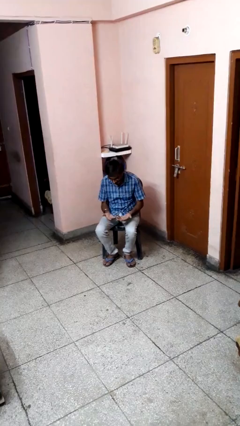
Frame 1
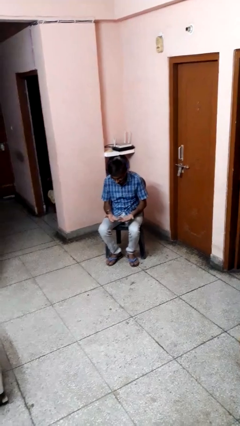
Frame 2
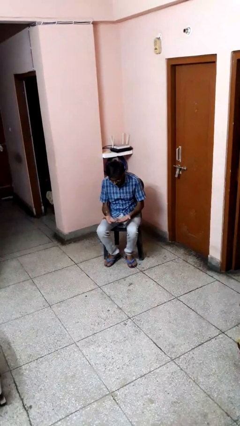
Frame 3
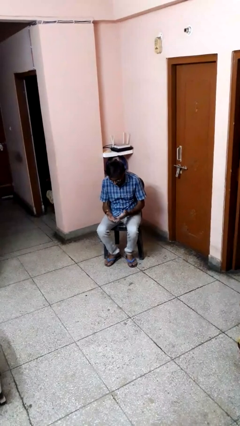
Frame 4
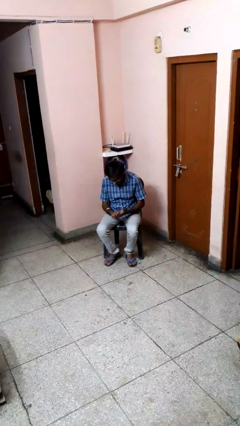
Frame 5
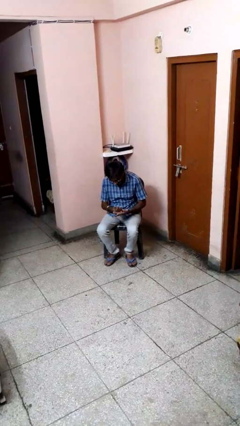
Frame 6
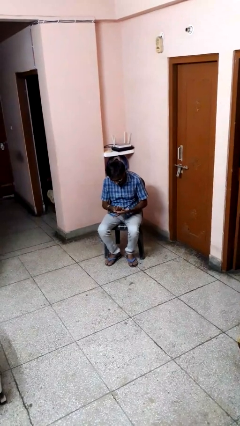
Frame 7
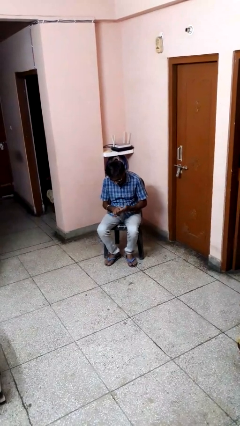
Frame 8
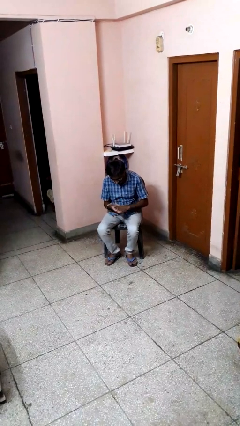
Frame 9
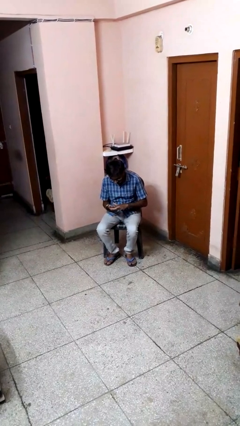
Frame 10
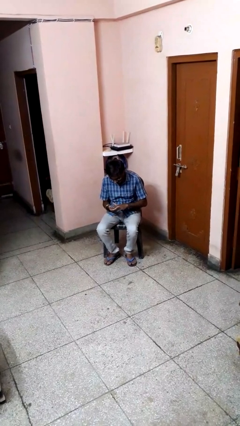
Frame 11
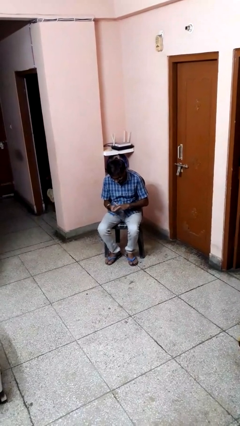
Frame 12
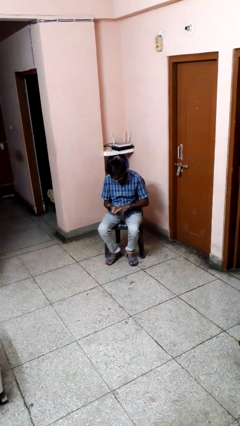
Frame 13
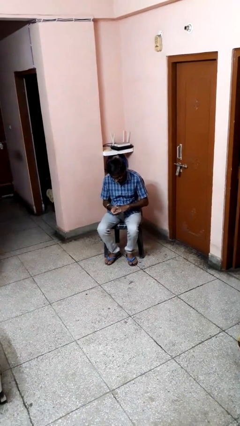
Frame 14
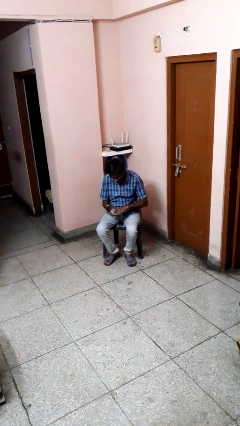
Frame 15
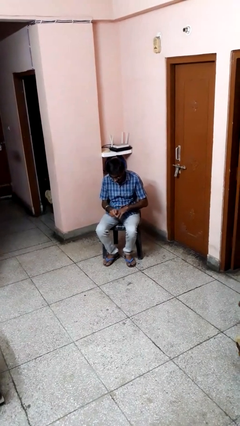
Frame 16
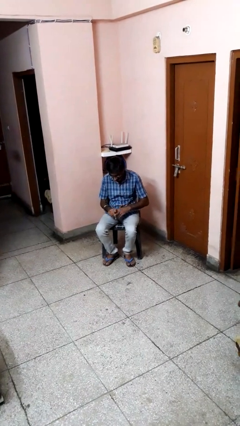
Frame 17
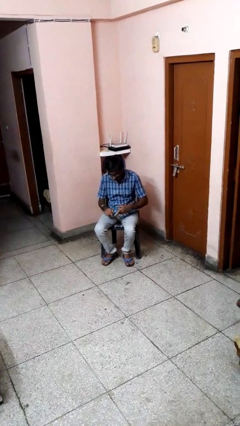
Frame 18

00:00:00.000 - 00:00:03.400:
person looks at hands in lap

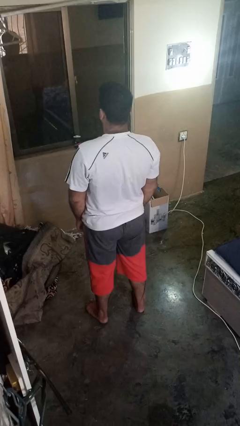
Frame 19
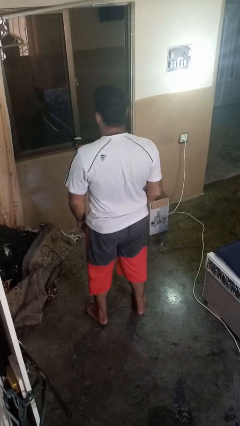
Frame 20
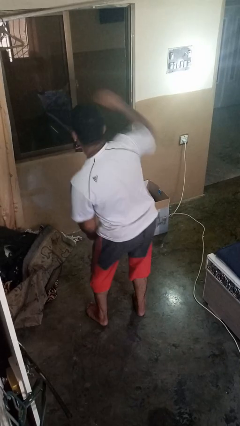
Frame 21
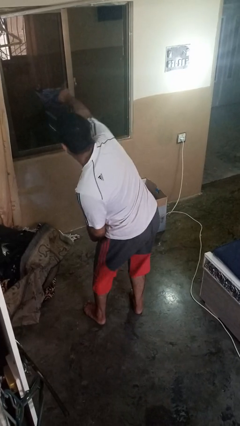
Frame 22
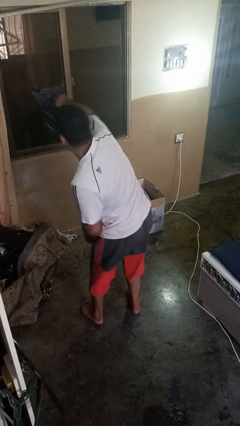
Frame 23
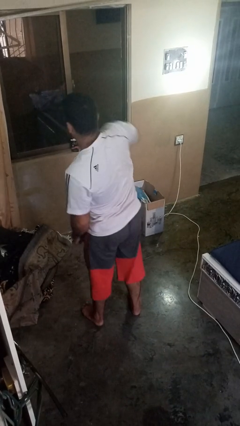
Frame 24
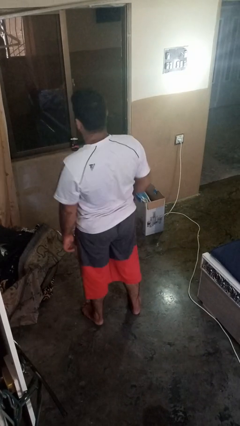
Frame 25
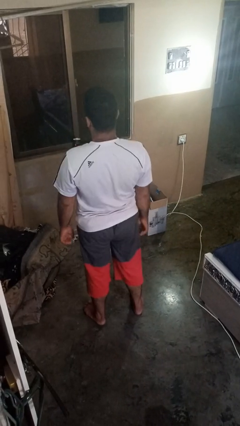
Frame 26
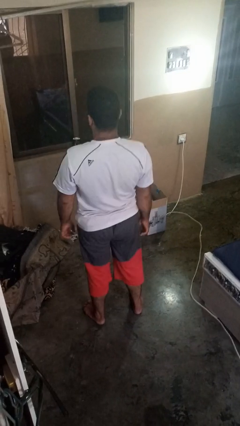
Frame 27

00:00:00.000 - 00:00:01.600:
person karate chop

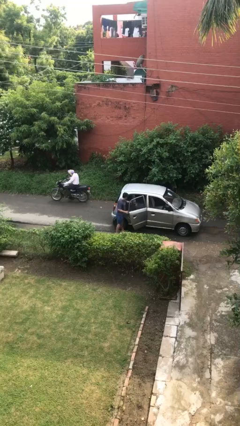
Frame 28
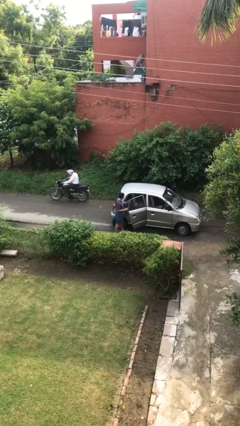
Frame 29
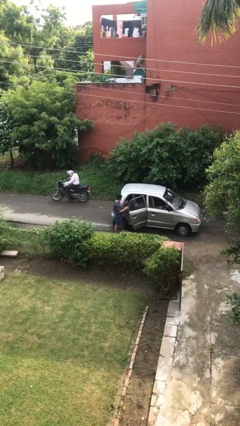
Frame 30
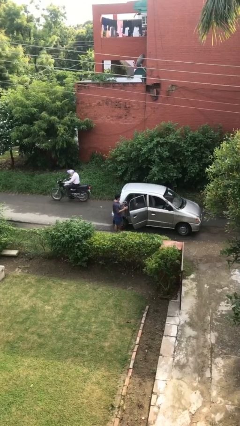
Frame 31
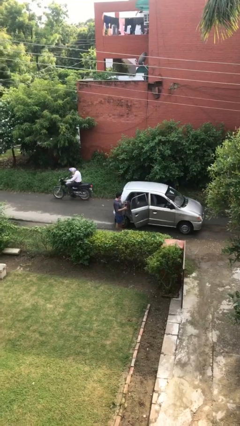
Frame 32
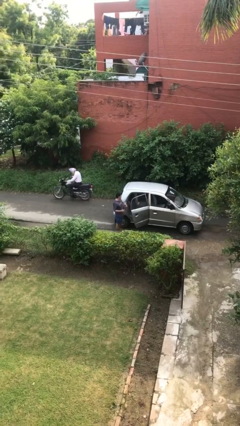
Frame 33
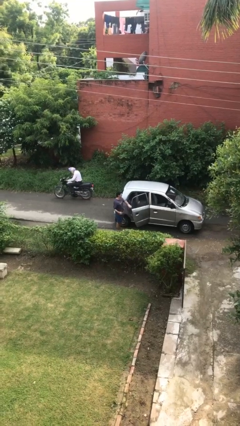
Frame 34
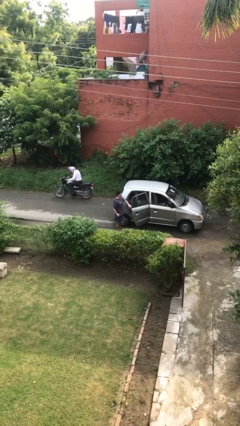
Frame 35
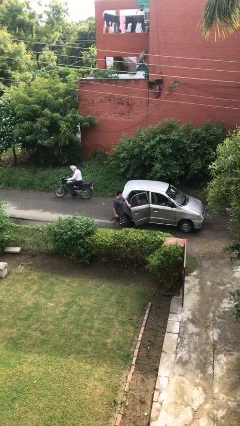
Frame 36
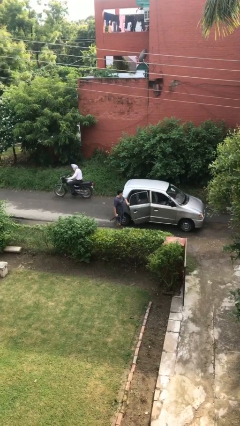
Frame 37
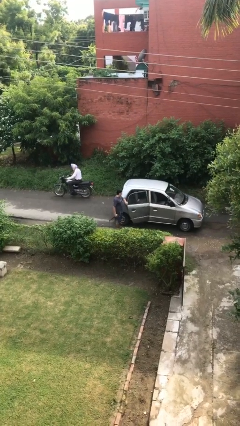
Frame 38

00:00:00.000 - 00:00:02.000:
person unloads car

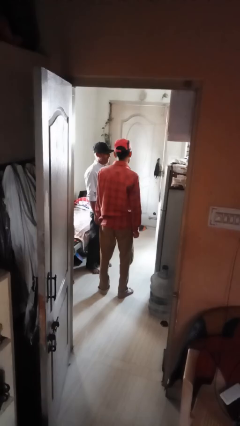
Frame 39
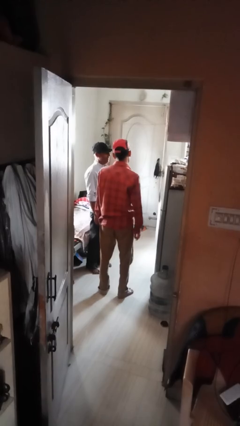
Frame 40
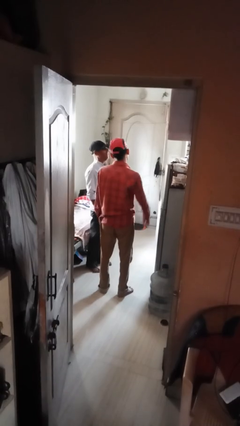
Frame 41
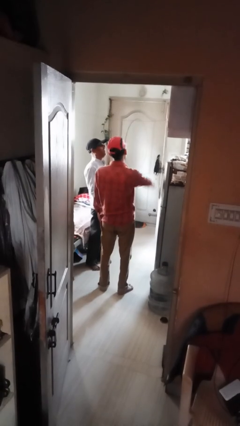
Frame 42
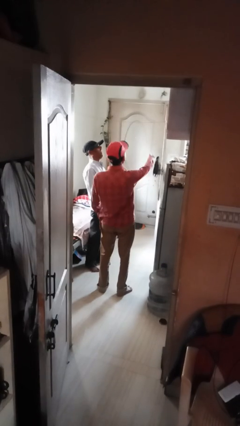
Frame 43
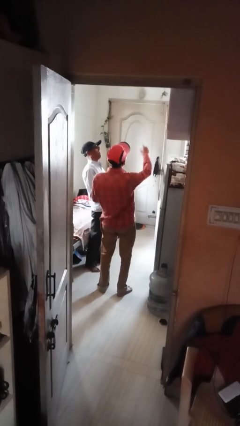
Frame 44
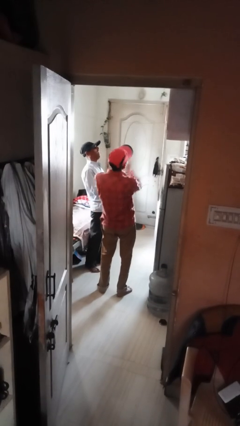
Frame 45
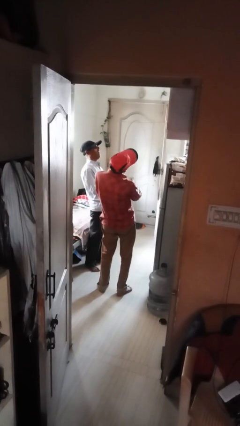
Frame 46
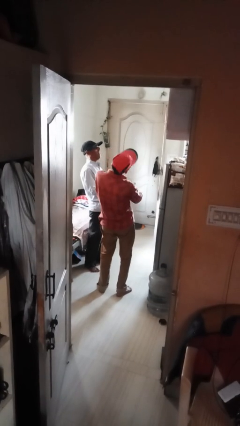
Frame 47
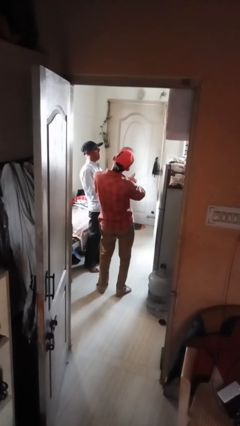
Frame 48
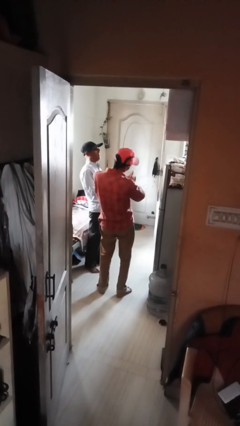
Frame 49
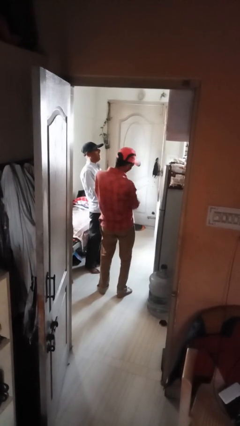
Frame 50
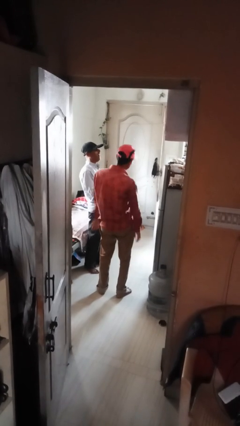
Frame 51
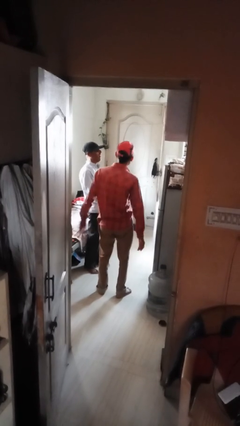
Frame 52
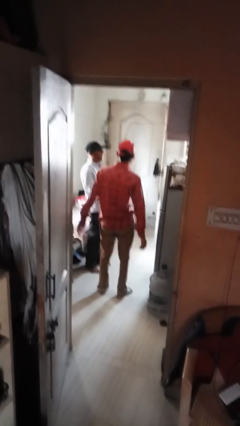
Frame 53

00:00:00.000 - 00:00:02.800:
person laughs with person

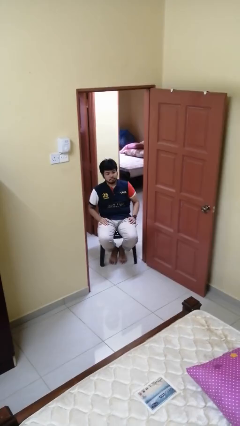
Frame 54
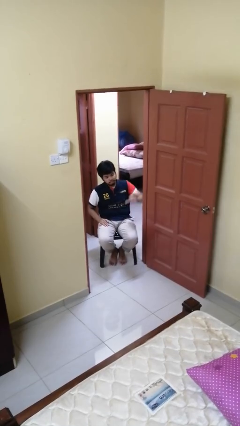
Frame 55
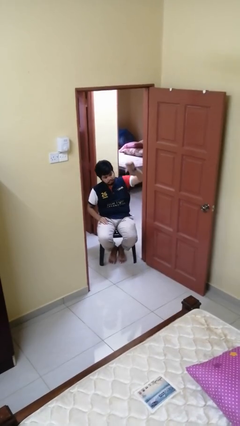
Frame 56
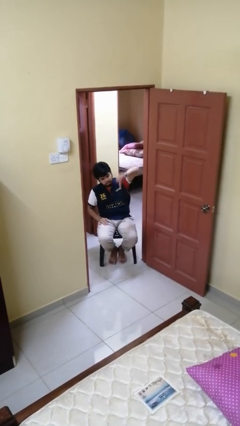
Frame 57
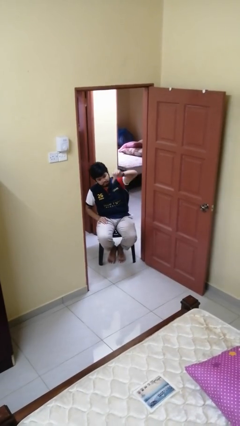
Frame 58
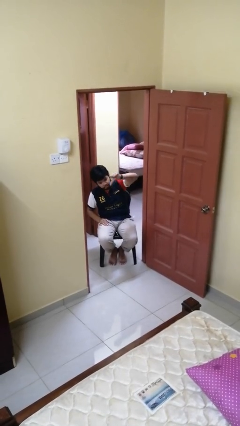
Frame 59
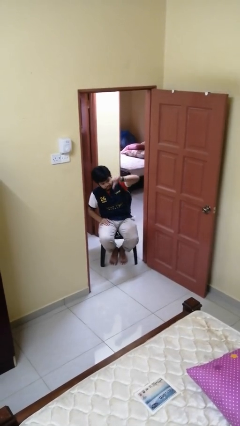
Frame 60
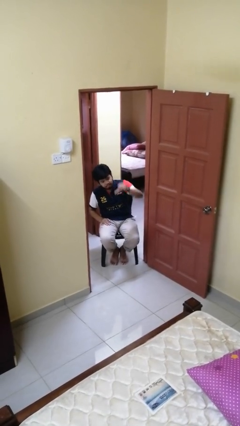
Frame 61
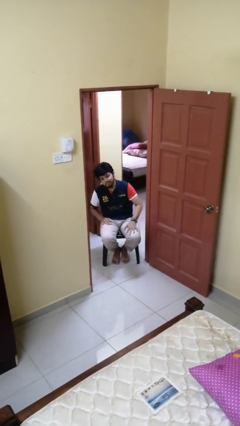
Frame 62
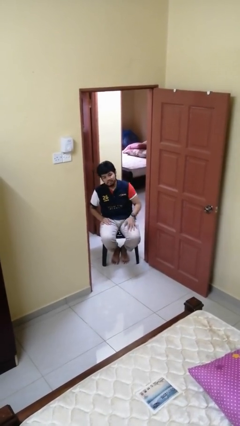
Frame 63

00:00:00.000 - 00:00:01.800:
person gestures thumbs down

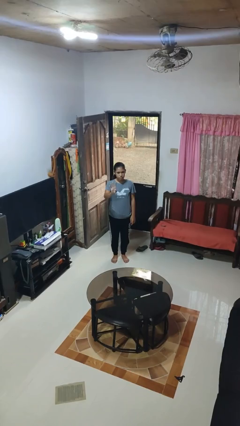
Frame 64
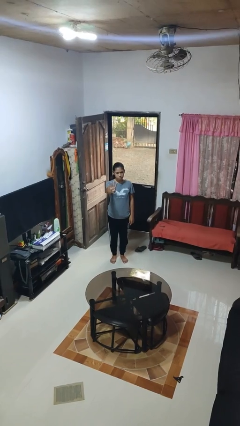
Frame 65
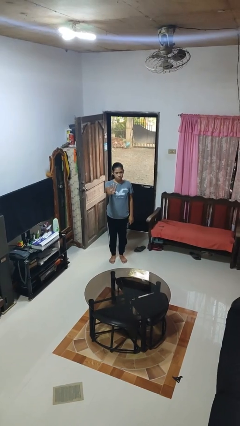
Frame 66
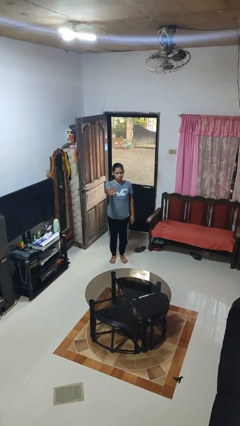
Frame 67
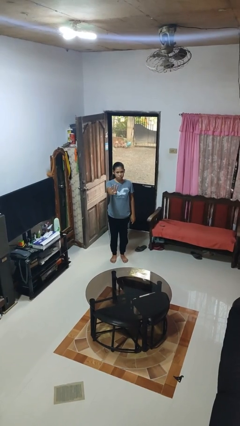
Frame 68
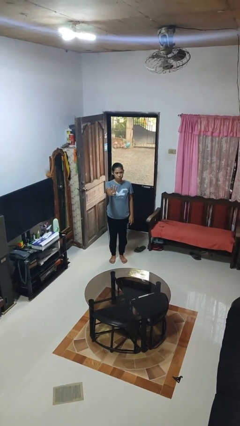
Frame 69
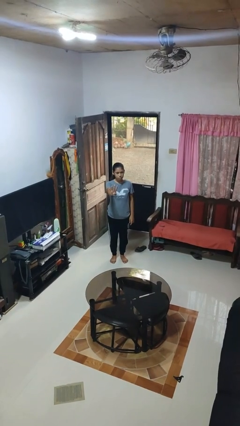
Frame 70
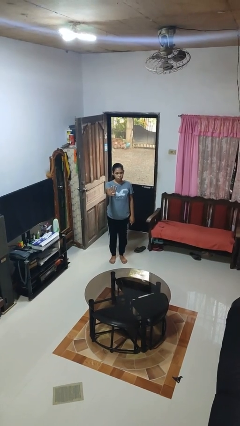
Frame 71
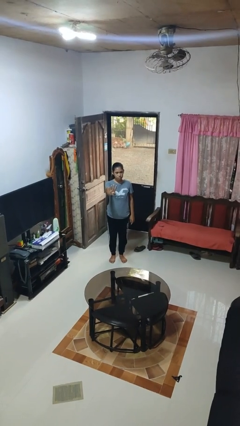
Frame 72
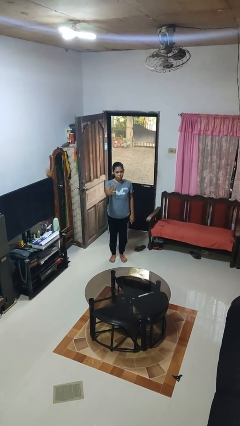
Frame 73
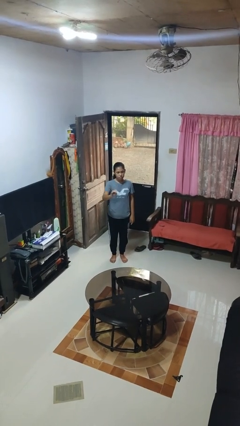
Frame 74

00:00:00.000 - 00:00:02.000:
person gestures number four

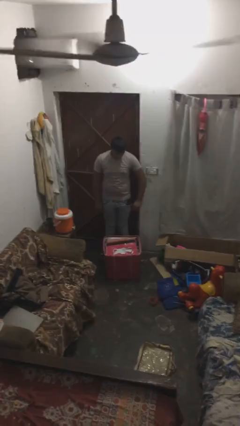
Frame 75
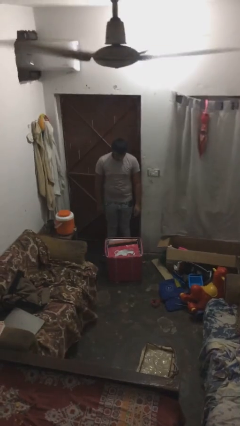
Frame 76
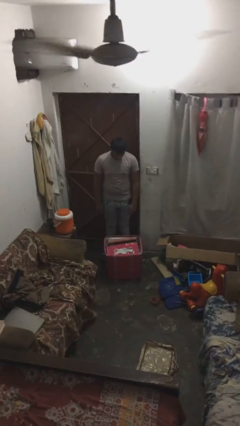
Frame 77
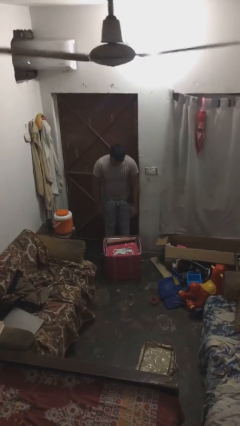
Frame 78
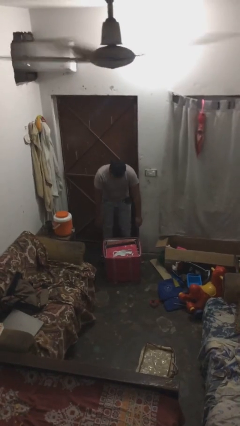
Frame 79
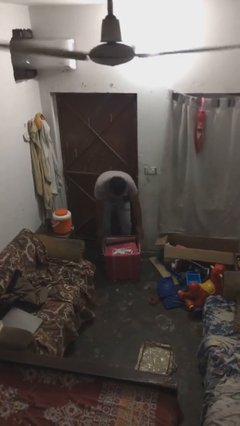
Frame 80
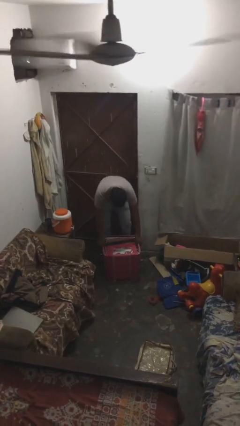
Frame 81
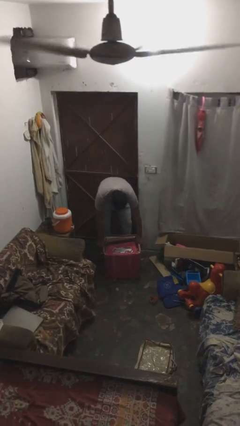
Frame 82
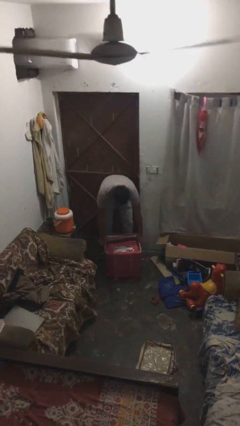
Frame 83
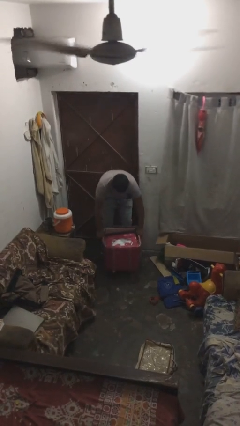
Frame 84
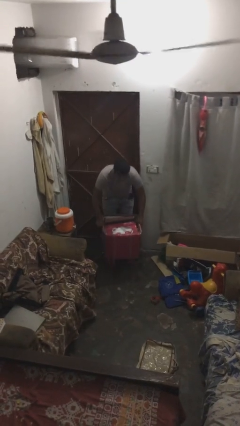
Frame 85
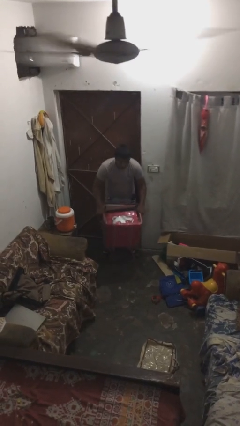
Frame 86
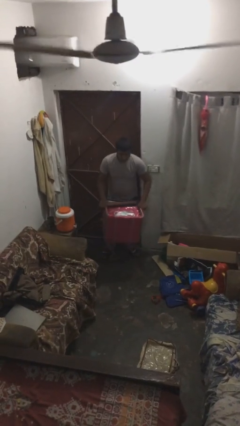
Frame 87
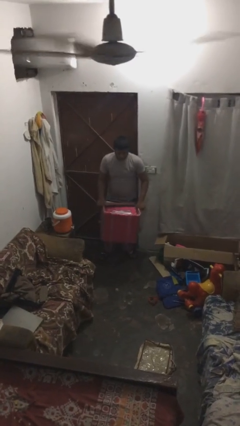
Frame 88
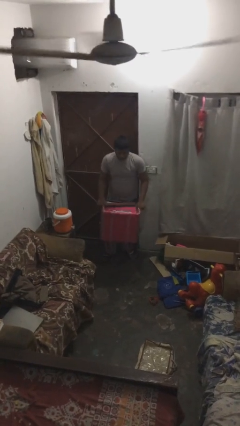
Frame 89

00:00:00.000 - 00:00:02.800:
person picks up object from floor

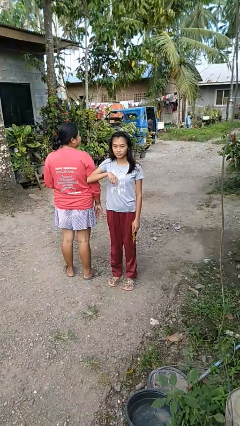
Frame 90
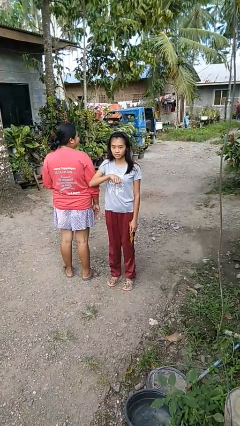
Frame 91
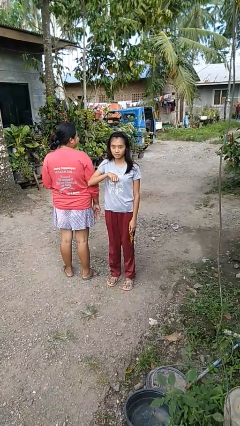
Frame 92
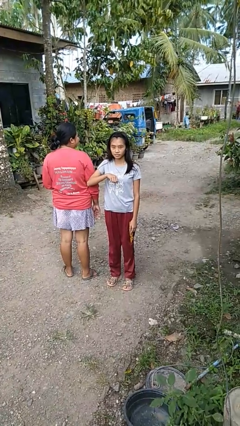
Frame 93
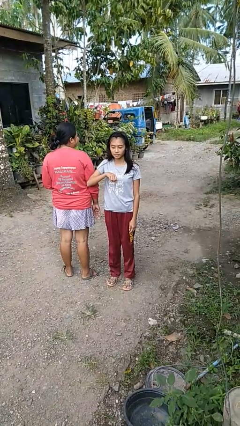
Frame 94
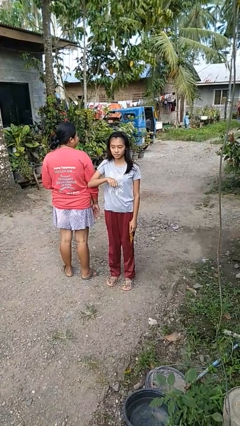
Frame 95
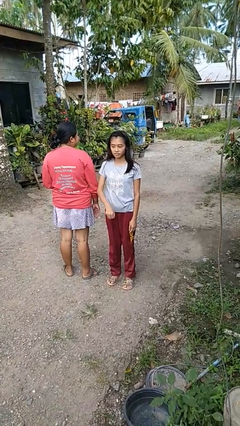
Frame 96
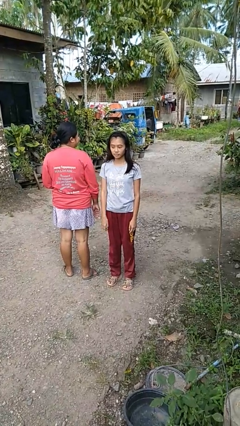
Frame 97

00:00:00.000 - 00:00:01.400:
person nudges person with elbow
